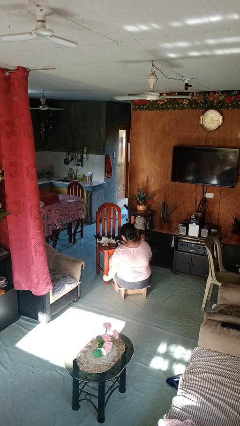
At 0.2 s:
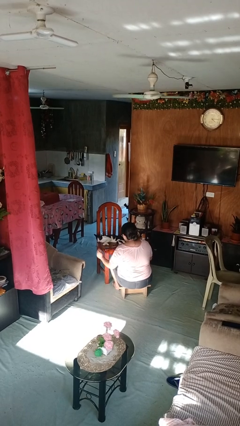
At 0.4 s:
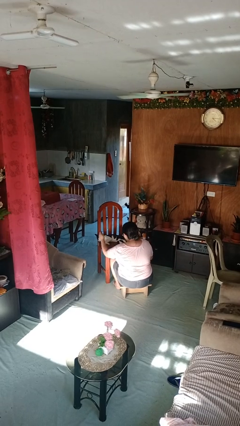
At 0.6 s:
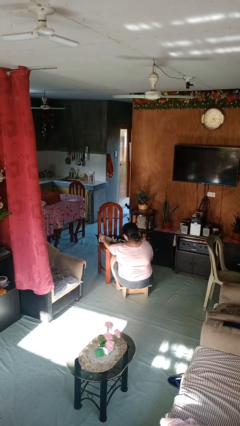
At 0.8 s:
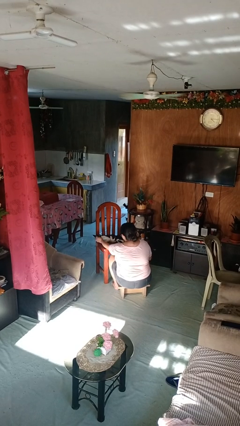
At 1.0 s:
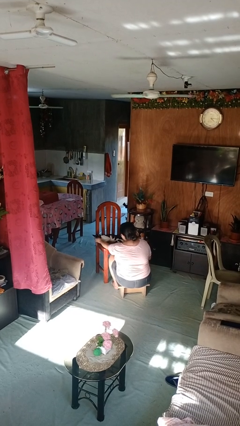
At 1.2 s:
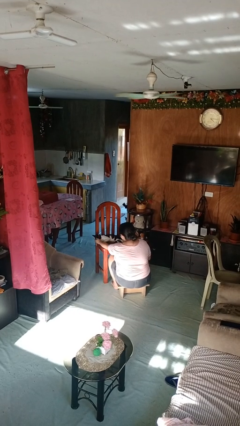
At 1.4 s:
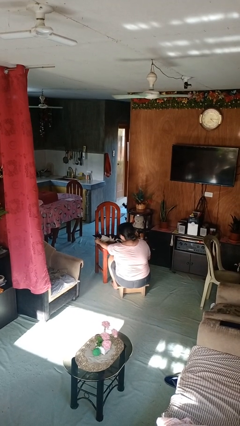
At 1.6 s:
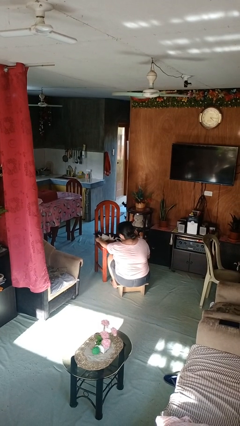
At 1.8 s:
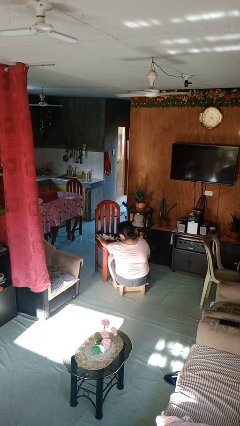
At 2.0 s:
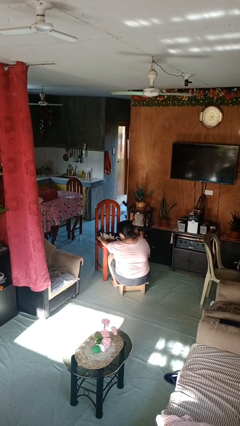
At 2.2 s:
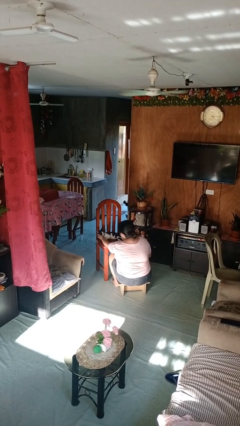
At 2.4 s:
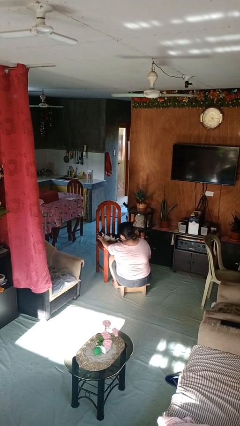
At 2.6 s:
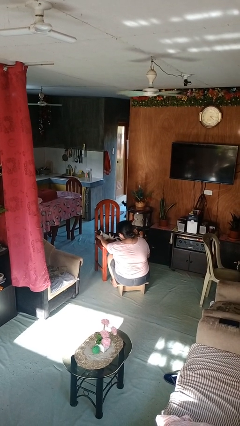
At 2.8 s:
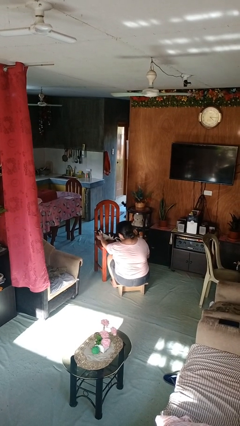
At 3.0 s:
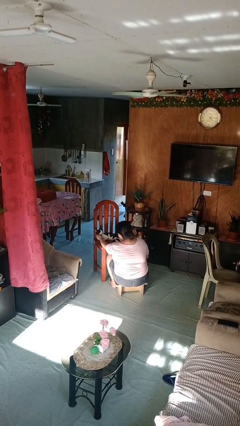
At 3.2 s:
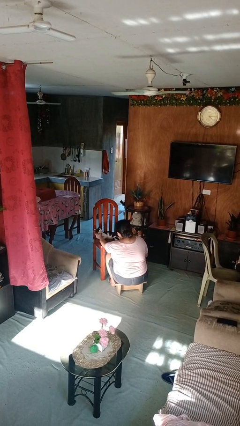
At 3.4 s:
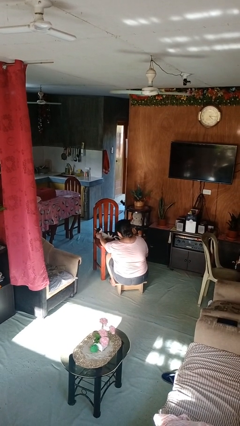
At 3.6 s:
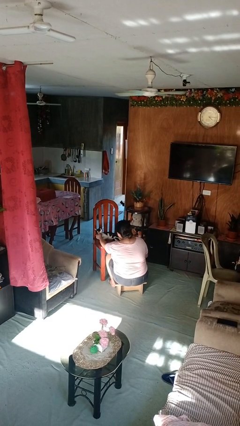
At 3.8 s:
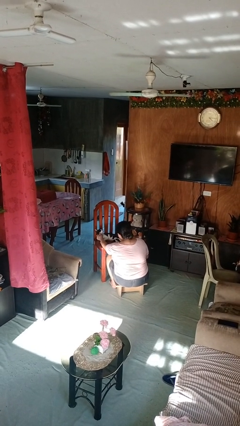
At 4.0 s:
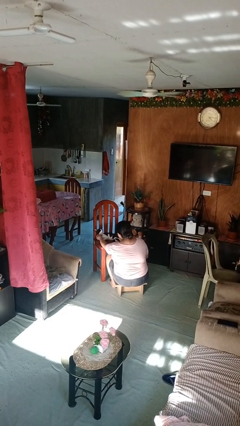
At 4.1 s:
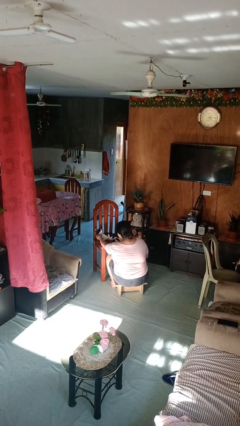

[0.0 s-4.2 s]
person pets cat

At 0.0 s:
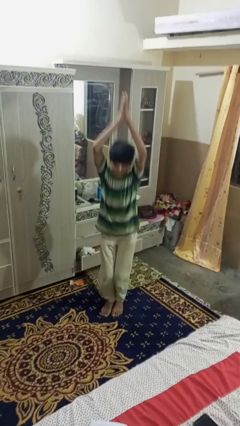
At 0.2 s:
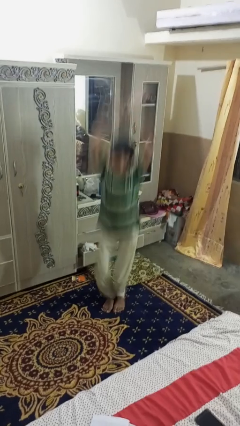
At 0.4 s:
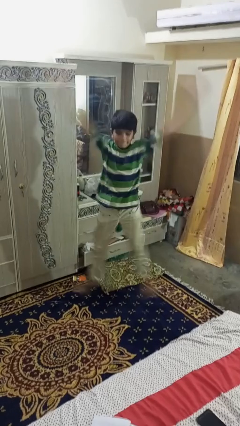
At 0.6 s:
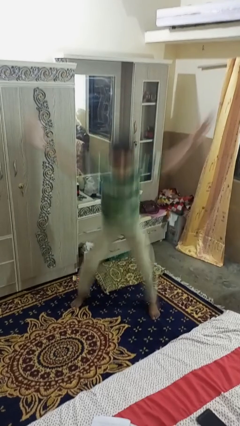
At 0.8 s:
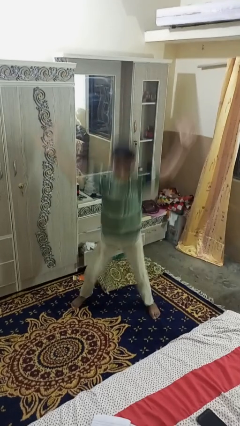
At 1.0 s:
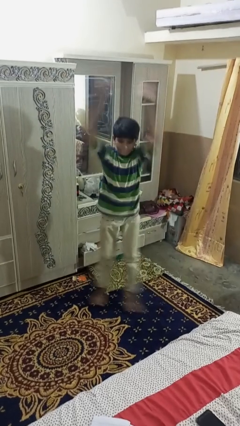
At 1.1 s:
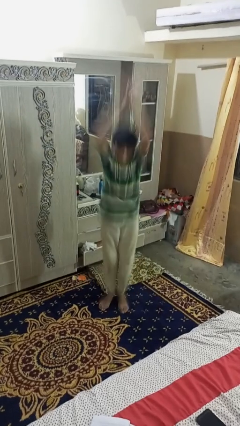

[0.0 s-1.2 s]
person exercises with jumping jacks

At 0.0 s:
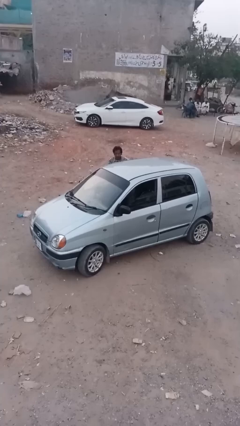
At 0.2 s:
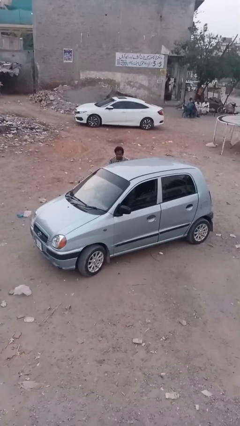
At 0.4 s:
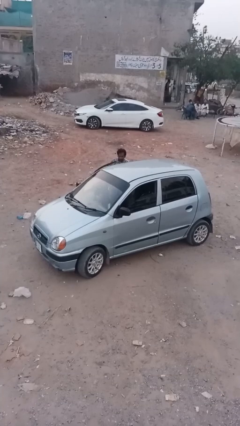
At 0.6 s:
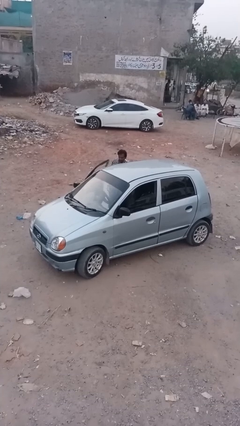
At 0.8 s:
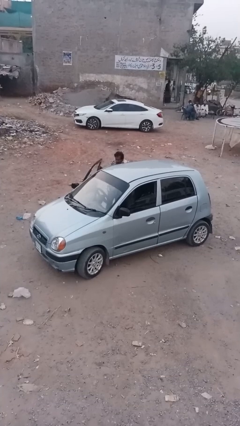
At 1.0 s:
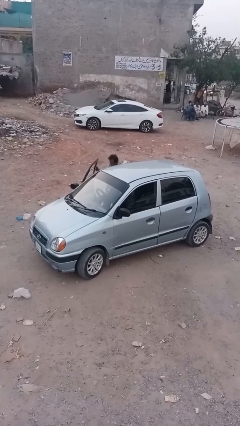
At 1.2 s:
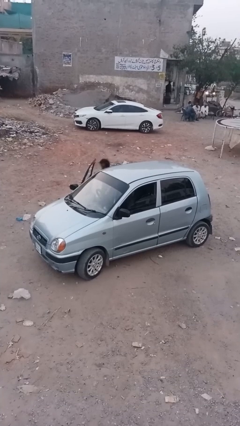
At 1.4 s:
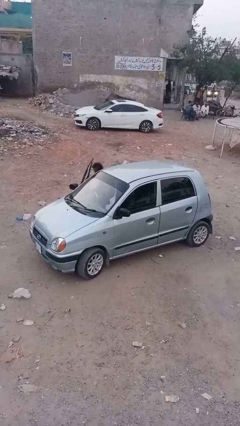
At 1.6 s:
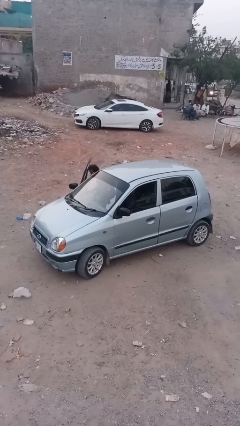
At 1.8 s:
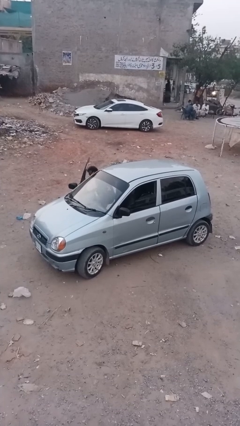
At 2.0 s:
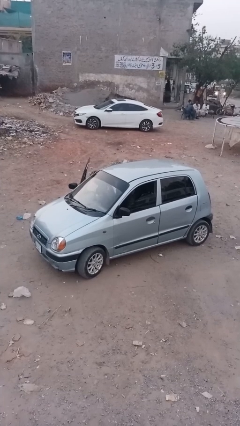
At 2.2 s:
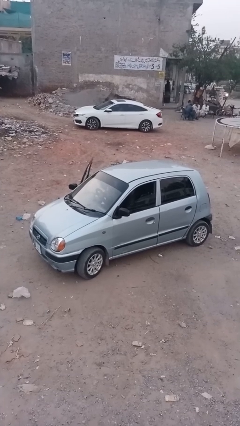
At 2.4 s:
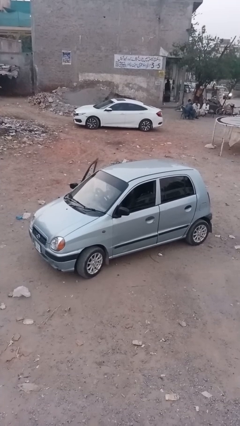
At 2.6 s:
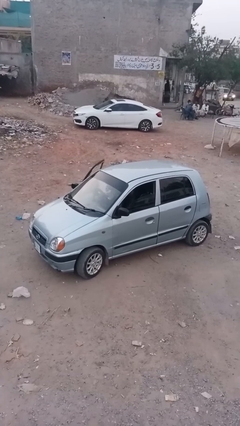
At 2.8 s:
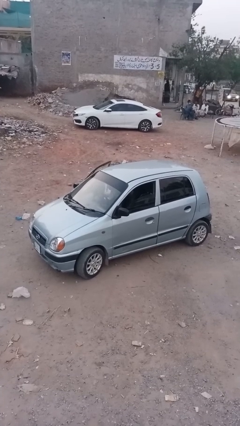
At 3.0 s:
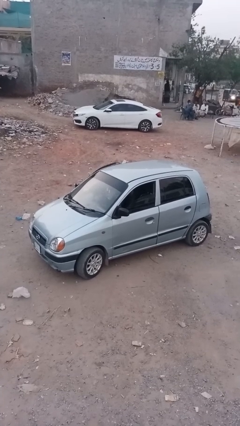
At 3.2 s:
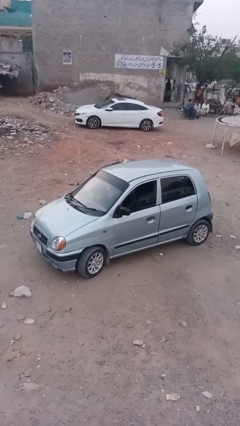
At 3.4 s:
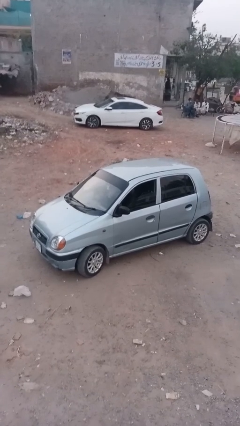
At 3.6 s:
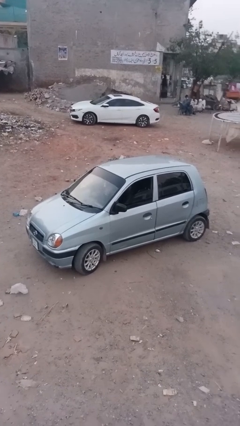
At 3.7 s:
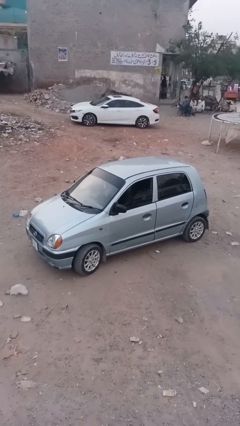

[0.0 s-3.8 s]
car picks up person

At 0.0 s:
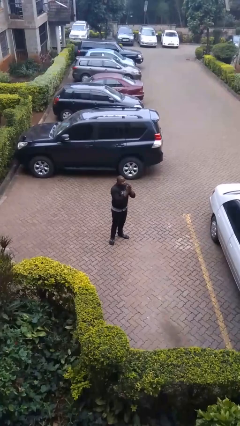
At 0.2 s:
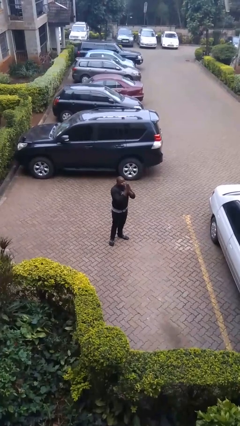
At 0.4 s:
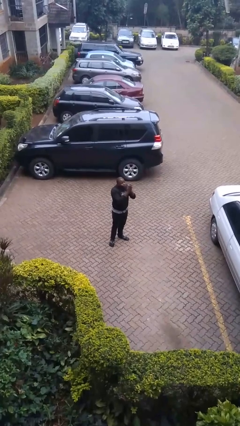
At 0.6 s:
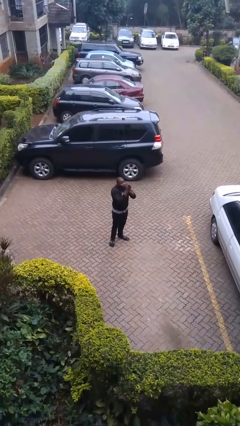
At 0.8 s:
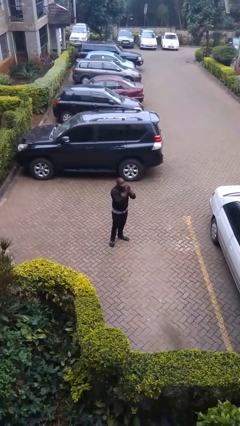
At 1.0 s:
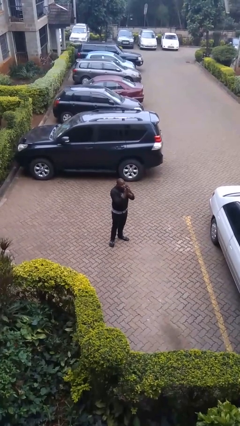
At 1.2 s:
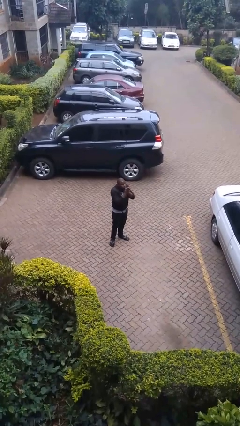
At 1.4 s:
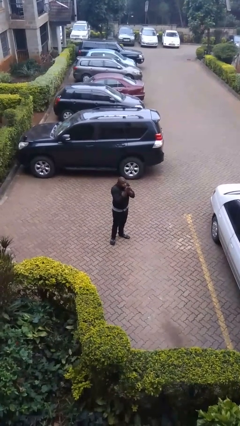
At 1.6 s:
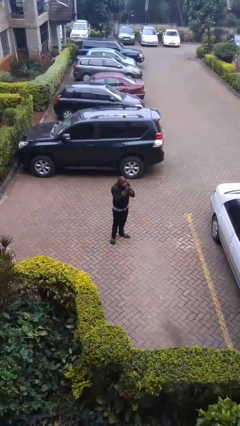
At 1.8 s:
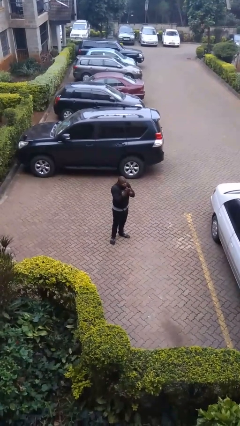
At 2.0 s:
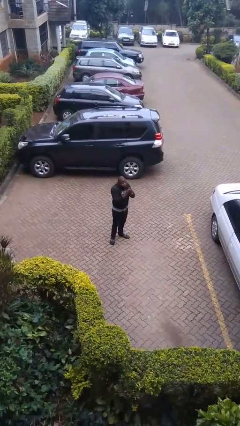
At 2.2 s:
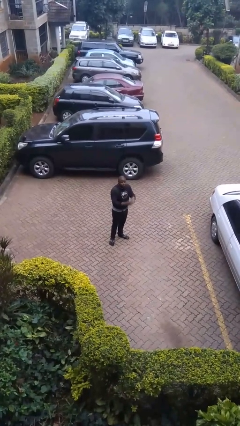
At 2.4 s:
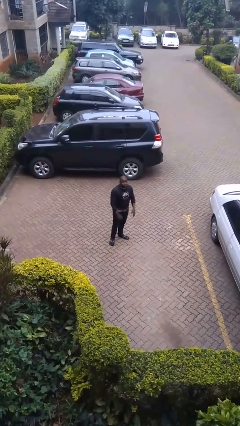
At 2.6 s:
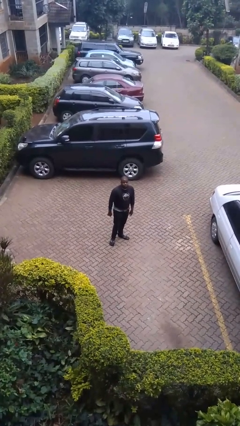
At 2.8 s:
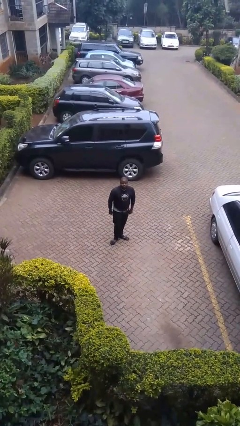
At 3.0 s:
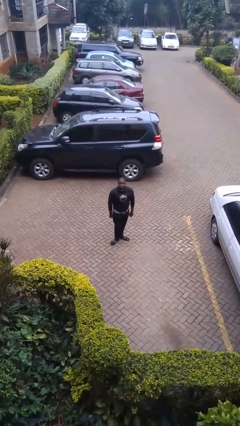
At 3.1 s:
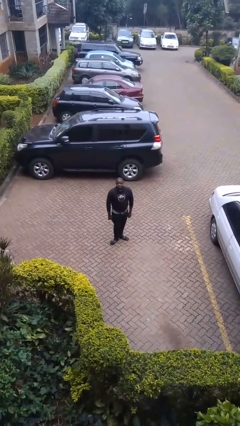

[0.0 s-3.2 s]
person blows into hands

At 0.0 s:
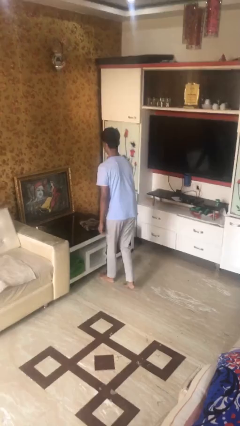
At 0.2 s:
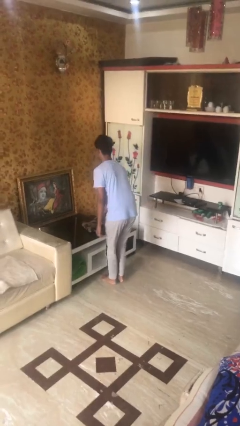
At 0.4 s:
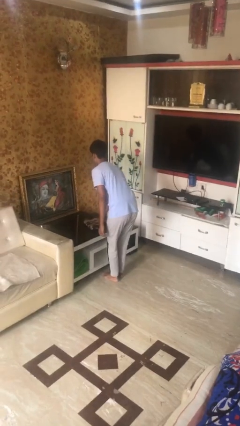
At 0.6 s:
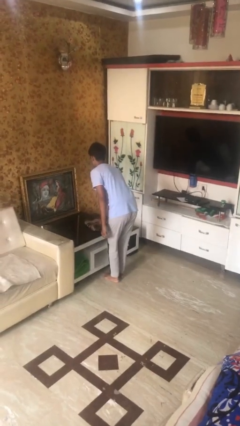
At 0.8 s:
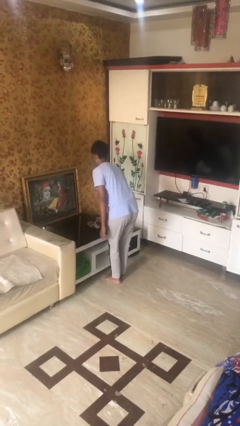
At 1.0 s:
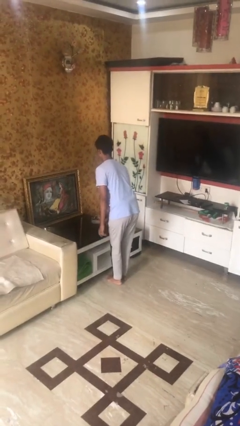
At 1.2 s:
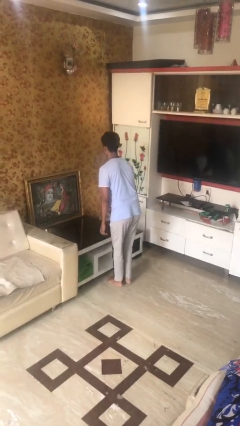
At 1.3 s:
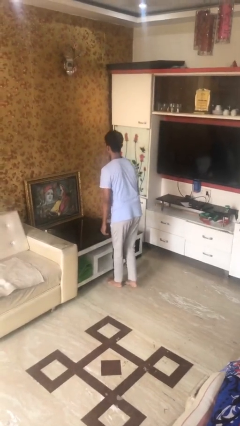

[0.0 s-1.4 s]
person picks up object from table

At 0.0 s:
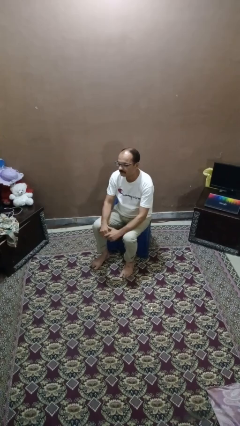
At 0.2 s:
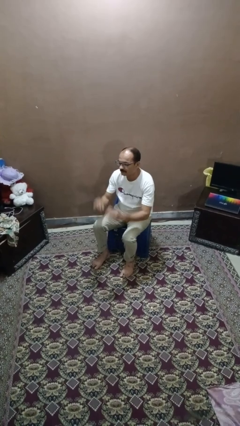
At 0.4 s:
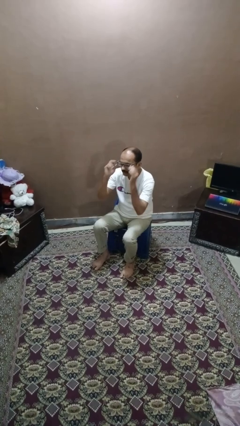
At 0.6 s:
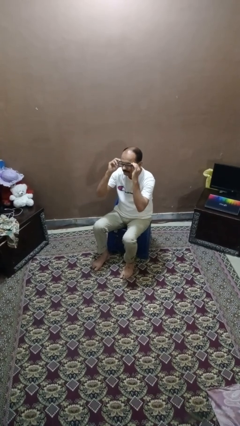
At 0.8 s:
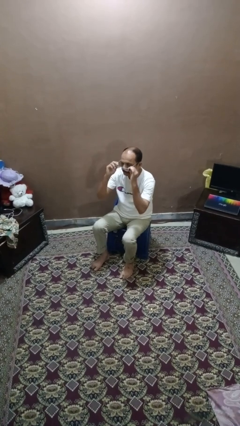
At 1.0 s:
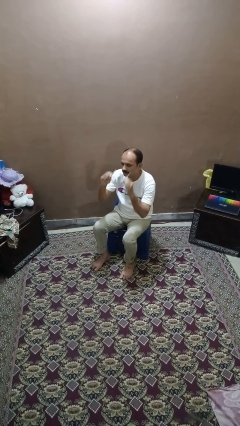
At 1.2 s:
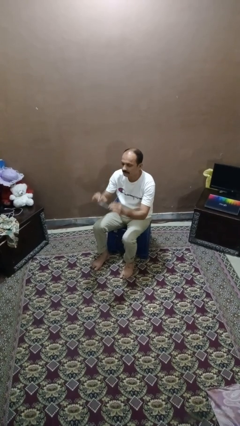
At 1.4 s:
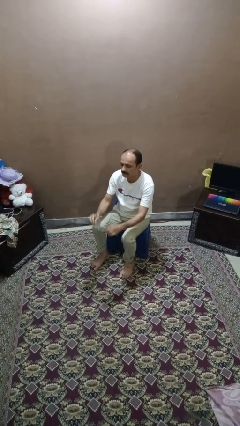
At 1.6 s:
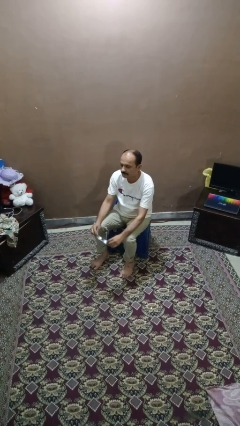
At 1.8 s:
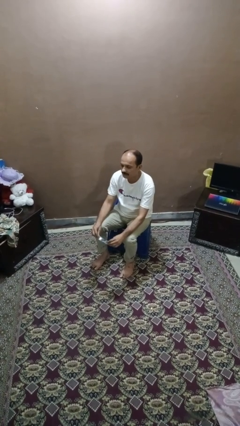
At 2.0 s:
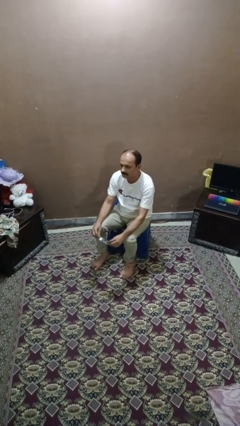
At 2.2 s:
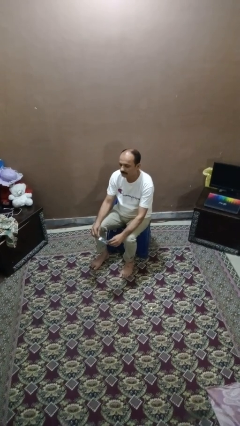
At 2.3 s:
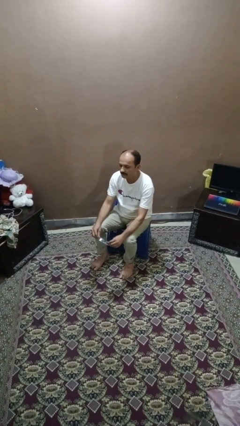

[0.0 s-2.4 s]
person takes off glasses

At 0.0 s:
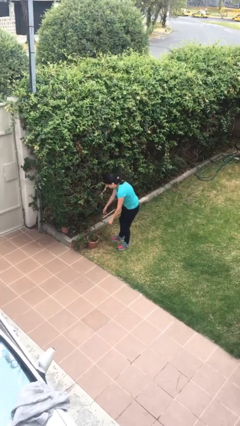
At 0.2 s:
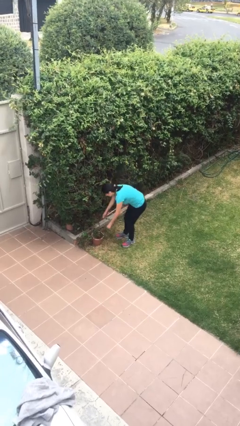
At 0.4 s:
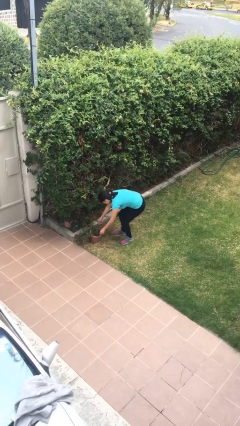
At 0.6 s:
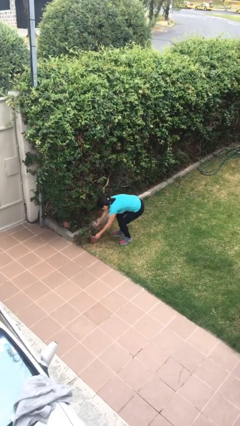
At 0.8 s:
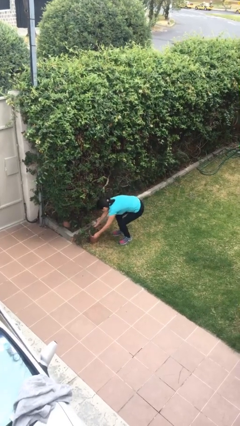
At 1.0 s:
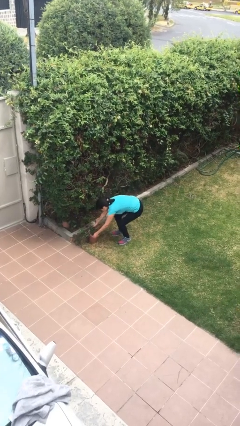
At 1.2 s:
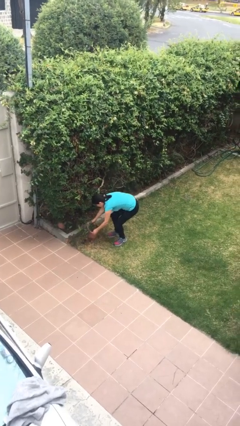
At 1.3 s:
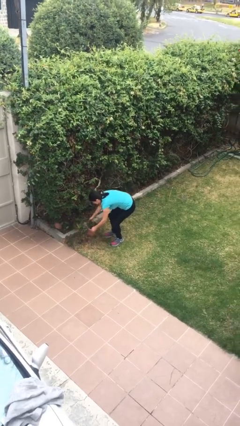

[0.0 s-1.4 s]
person picks up object from floor
